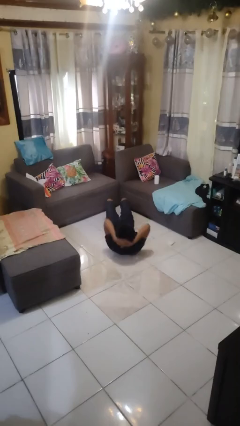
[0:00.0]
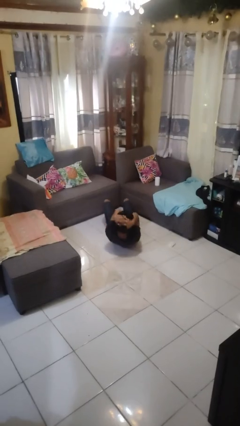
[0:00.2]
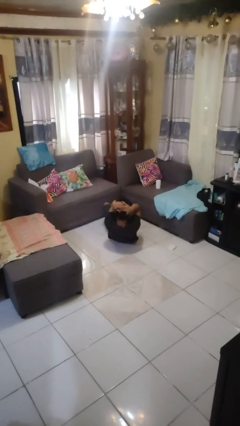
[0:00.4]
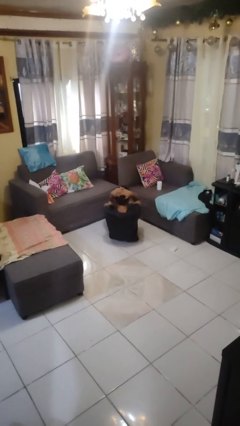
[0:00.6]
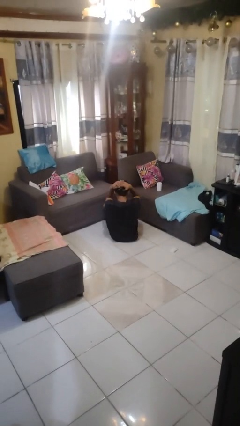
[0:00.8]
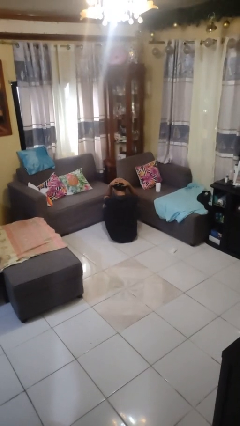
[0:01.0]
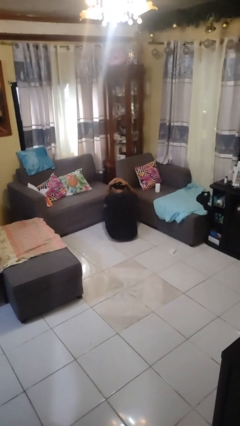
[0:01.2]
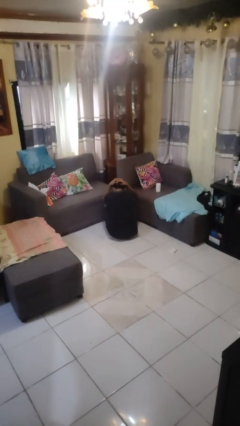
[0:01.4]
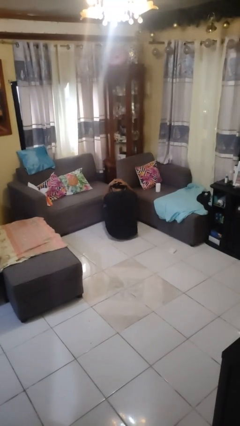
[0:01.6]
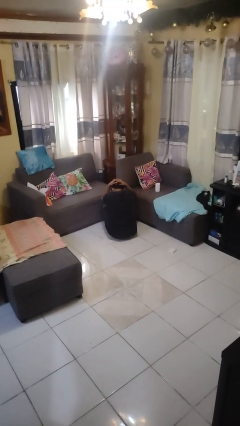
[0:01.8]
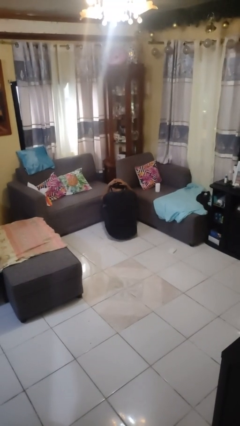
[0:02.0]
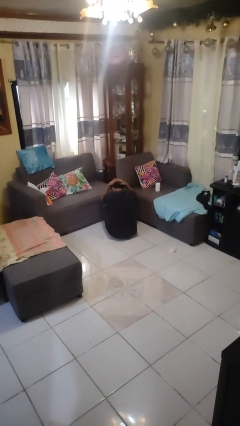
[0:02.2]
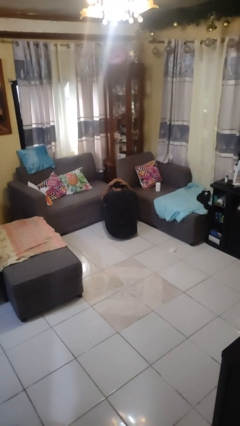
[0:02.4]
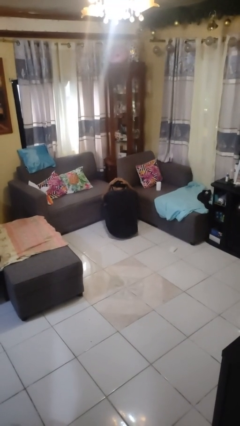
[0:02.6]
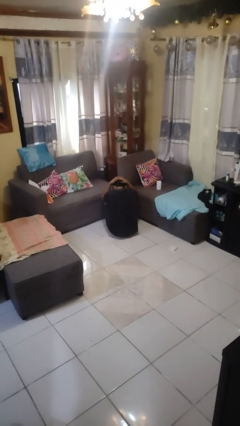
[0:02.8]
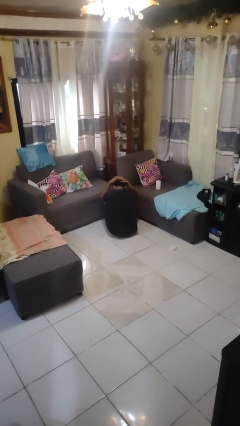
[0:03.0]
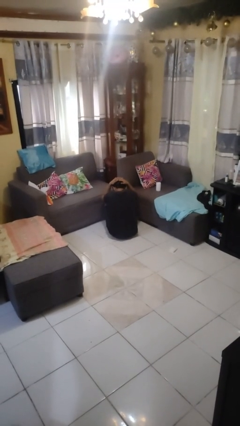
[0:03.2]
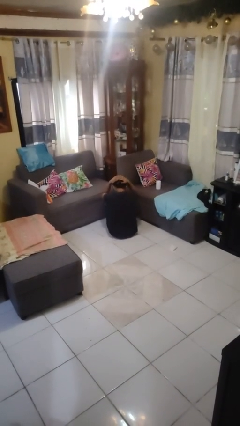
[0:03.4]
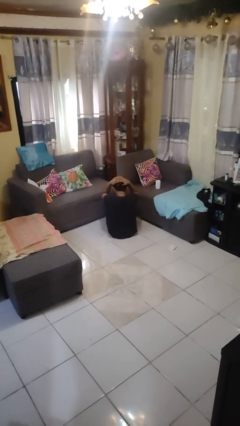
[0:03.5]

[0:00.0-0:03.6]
person exercises with situp

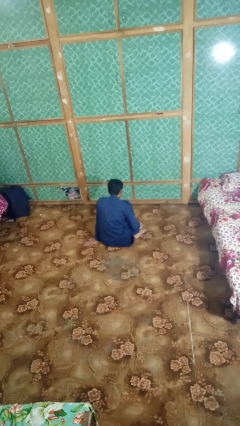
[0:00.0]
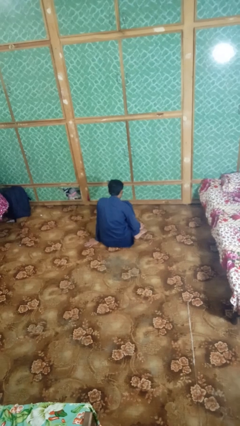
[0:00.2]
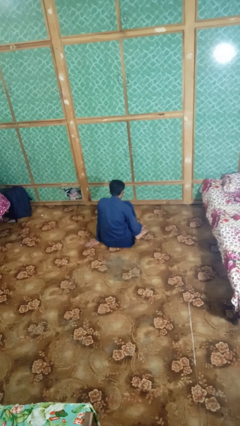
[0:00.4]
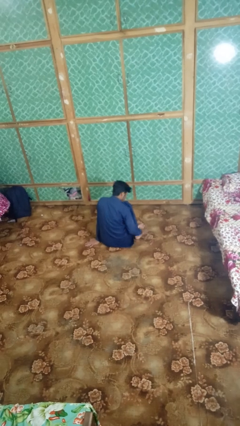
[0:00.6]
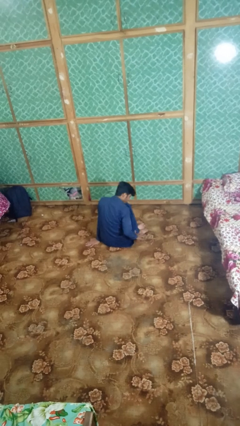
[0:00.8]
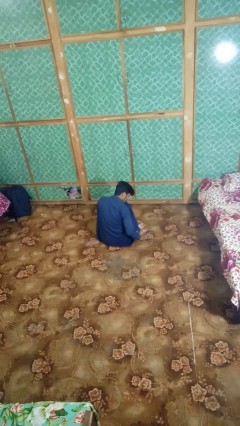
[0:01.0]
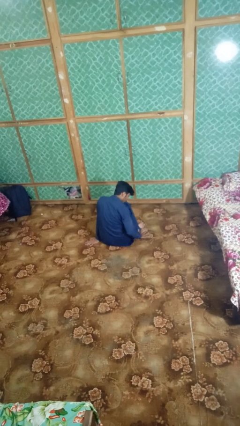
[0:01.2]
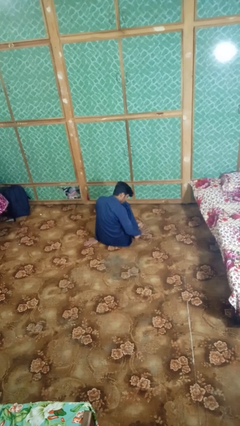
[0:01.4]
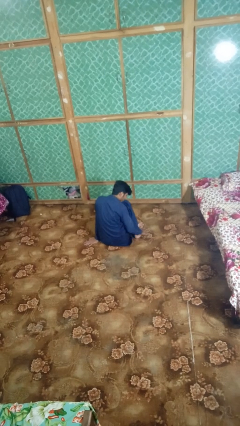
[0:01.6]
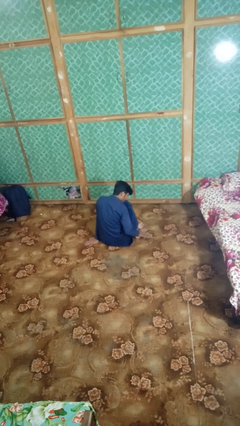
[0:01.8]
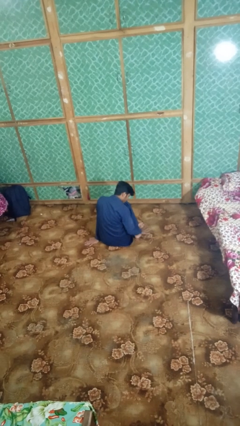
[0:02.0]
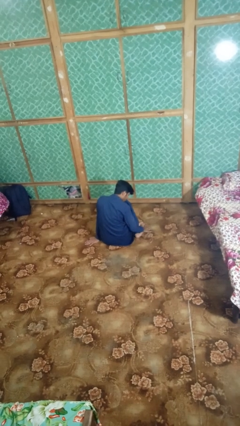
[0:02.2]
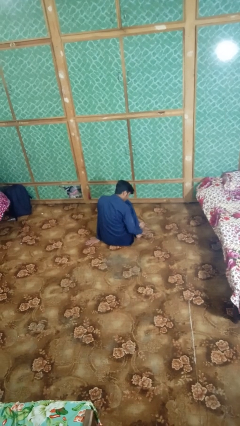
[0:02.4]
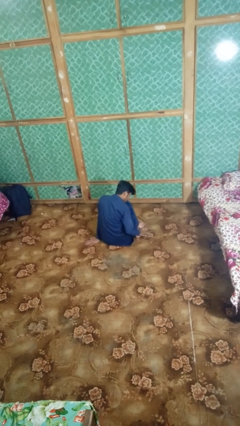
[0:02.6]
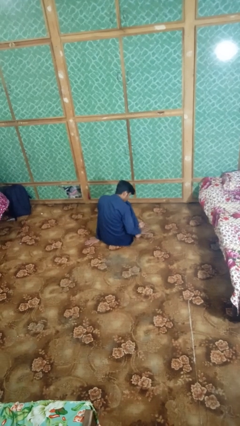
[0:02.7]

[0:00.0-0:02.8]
person rubs foot

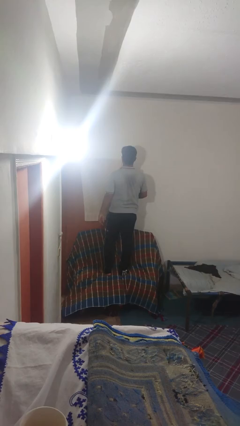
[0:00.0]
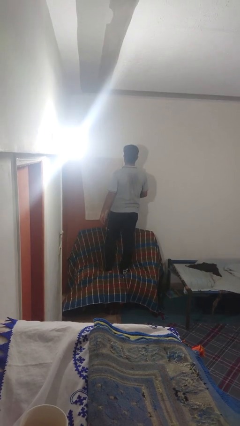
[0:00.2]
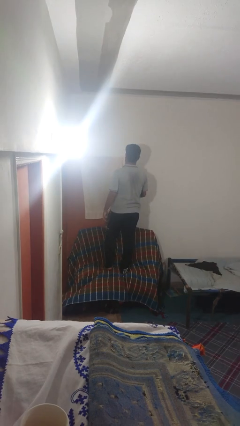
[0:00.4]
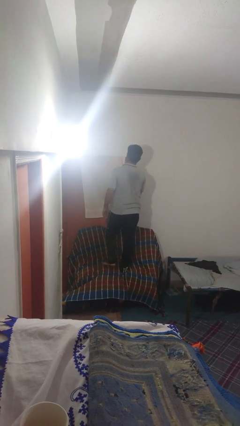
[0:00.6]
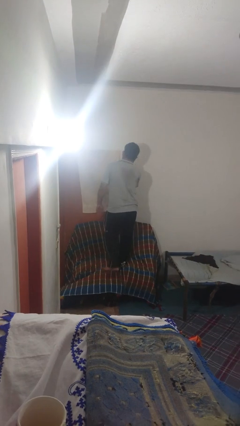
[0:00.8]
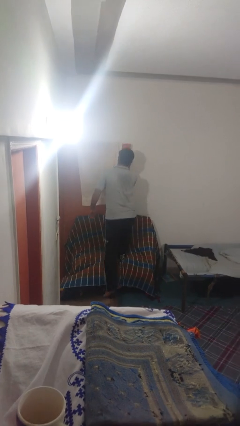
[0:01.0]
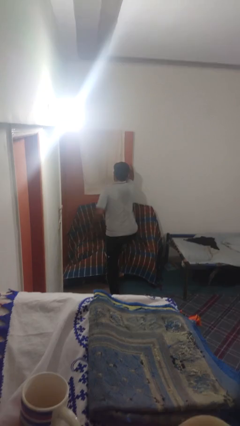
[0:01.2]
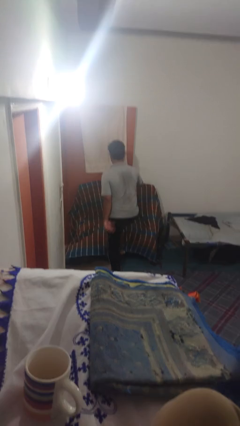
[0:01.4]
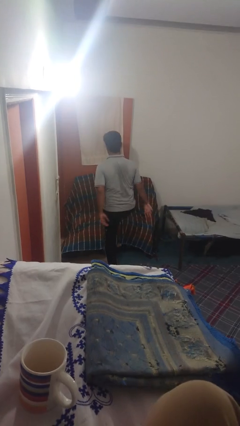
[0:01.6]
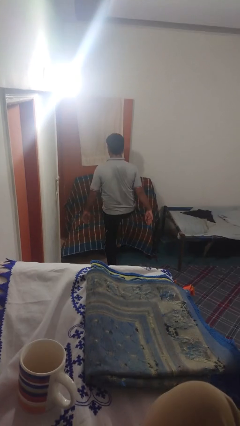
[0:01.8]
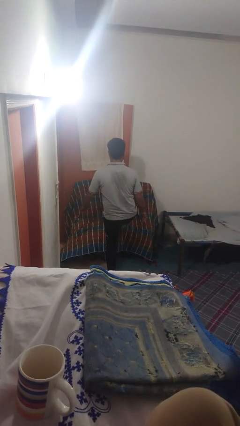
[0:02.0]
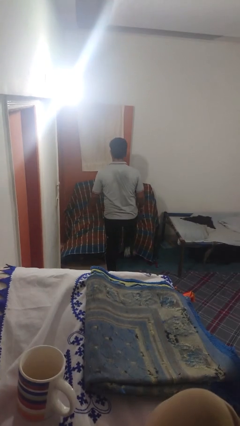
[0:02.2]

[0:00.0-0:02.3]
person climbs off couch

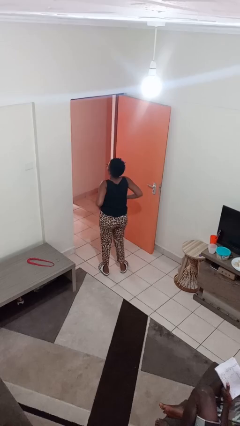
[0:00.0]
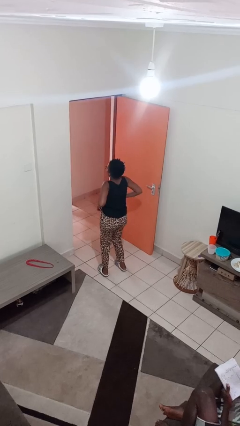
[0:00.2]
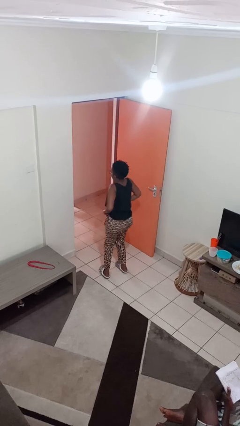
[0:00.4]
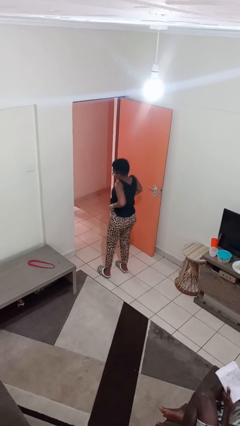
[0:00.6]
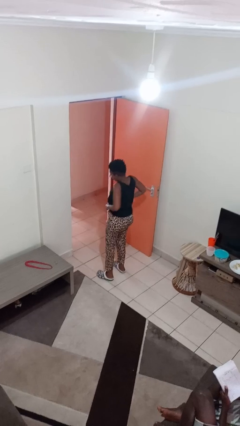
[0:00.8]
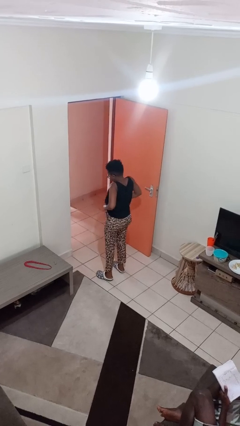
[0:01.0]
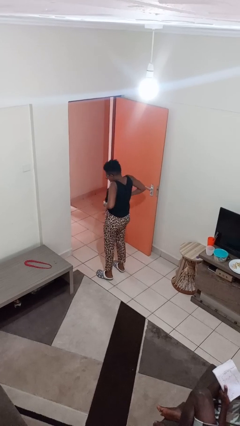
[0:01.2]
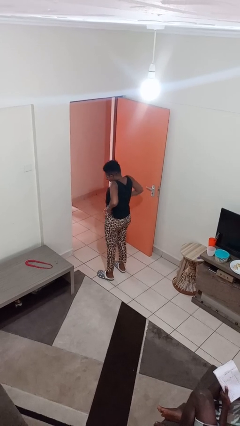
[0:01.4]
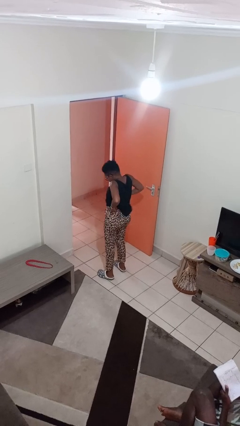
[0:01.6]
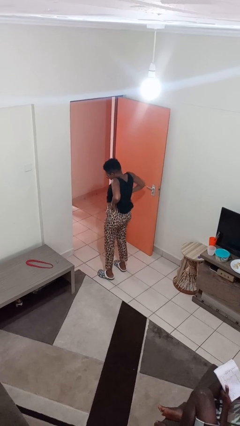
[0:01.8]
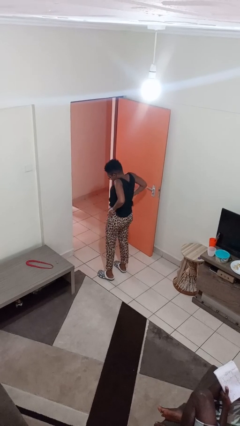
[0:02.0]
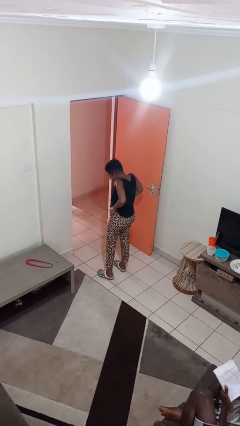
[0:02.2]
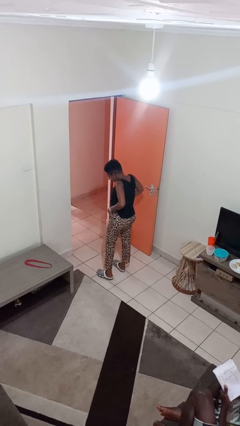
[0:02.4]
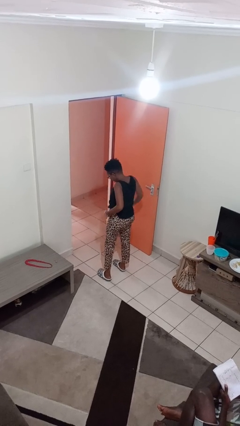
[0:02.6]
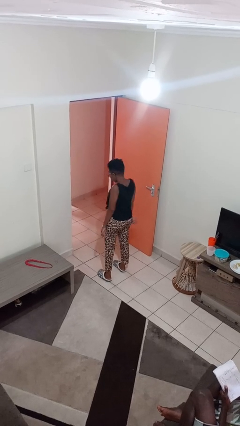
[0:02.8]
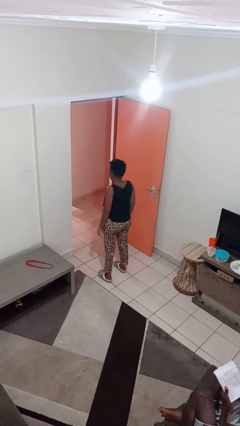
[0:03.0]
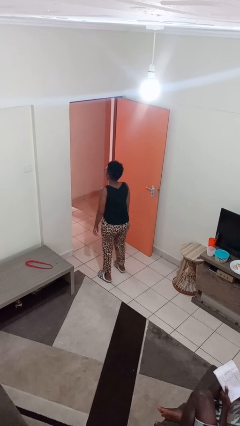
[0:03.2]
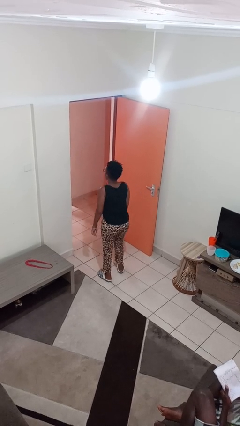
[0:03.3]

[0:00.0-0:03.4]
person hikes up pants

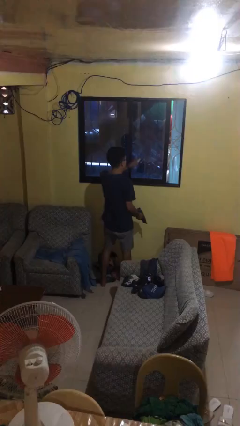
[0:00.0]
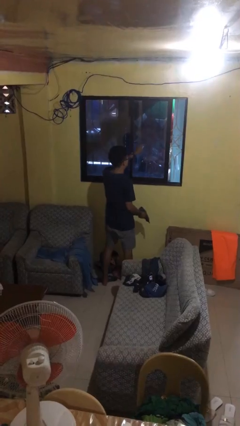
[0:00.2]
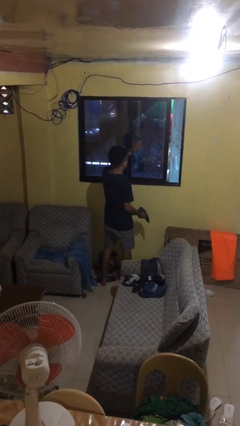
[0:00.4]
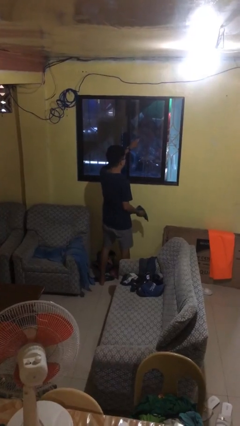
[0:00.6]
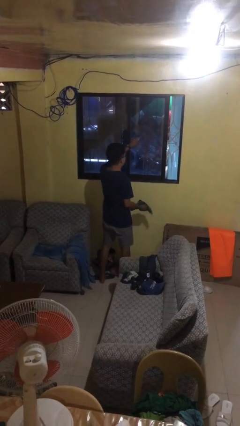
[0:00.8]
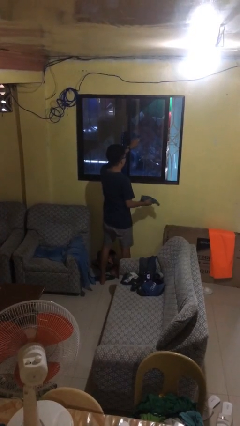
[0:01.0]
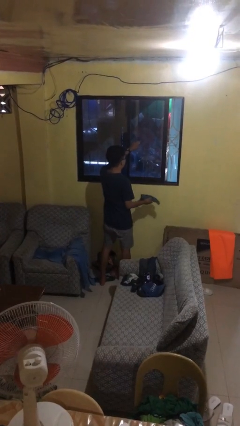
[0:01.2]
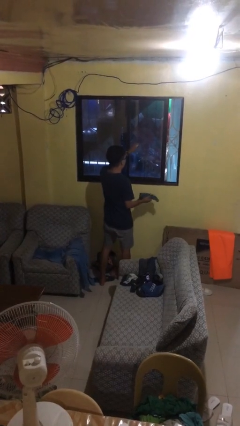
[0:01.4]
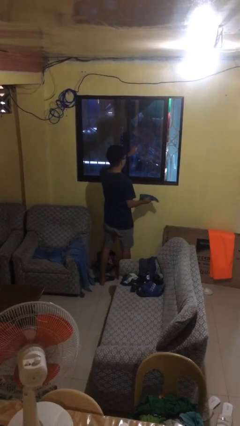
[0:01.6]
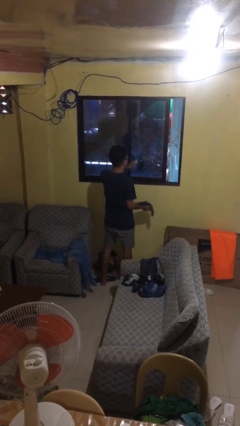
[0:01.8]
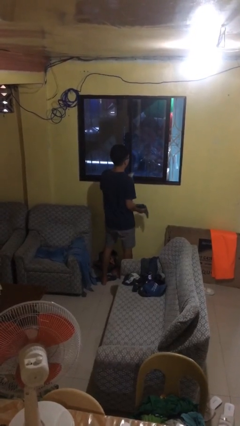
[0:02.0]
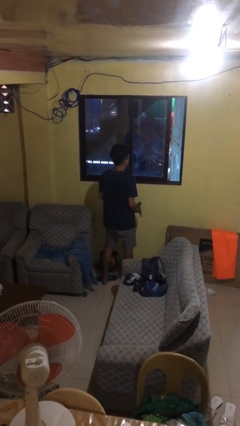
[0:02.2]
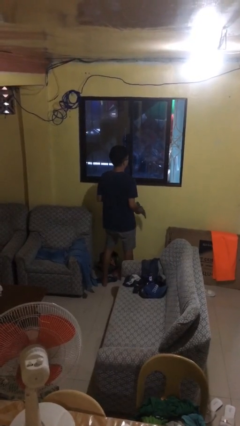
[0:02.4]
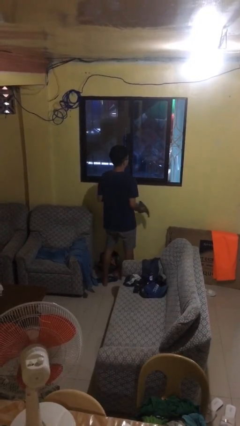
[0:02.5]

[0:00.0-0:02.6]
person sprays from bottle

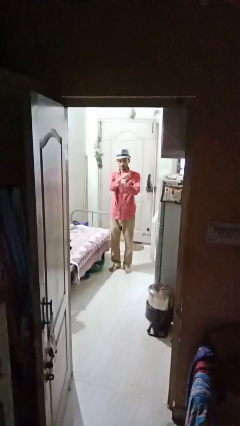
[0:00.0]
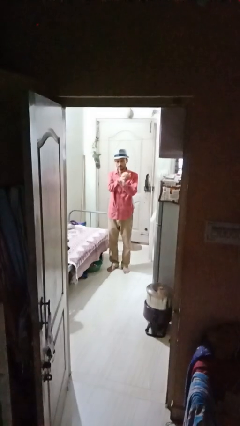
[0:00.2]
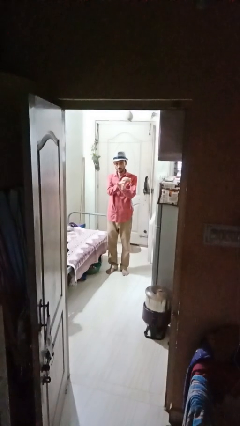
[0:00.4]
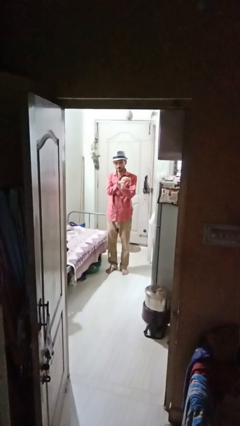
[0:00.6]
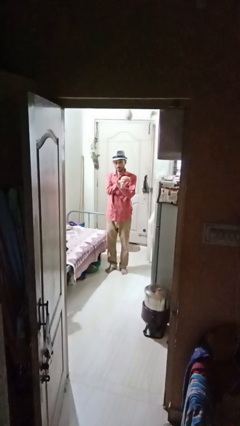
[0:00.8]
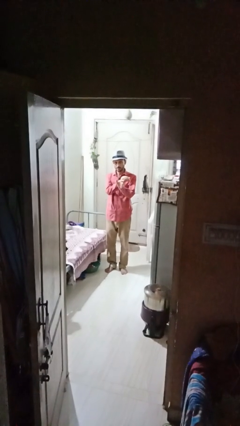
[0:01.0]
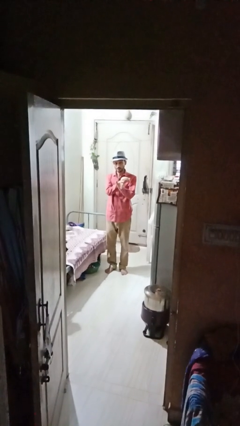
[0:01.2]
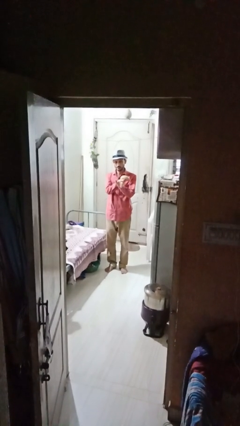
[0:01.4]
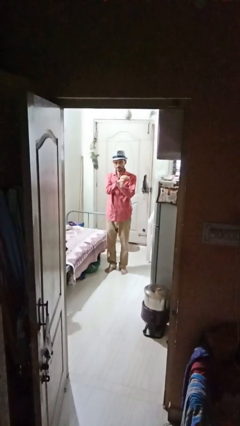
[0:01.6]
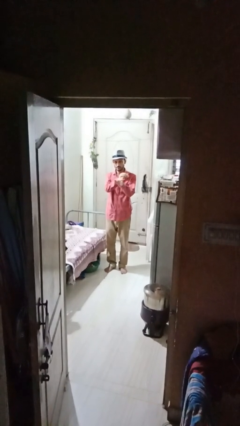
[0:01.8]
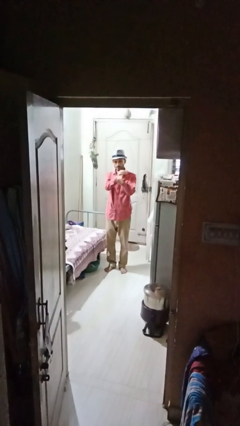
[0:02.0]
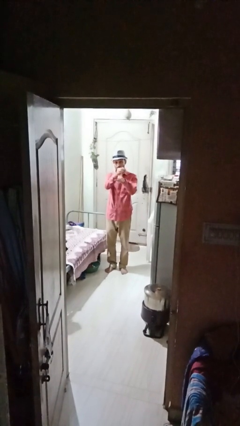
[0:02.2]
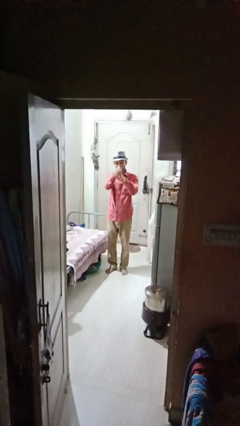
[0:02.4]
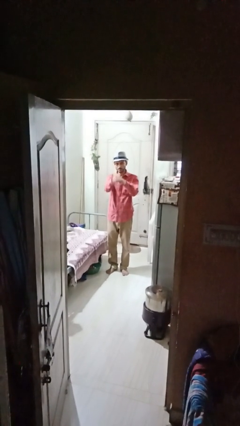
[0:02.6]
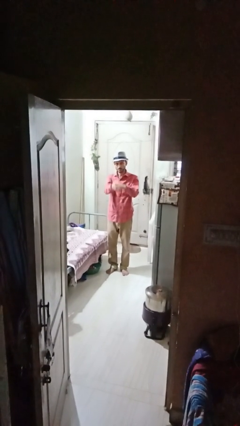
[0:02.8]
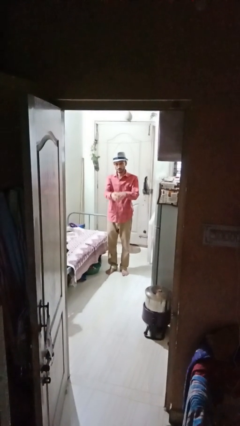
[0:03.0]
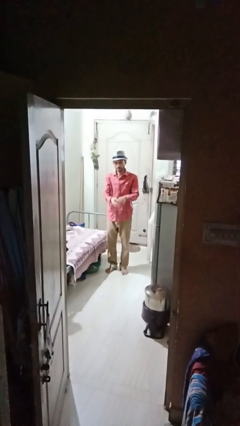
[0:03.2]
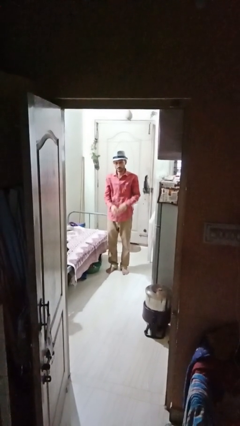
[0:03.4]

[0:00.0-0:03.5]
person cracks knuckles
